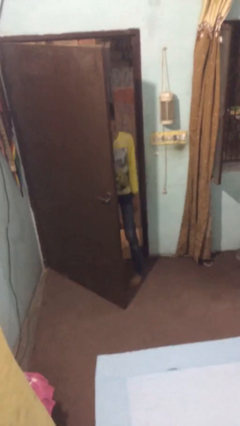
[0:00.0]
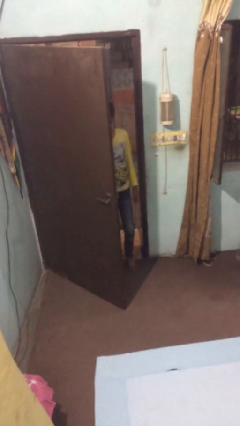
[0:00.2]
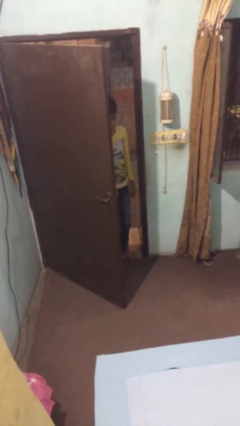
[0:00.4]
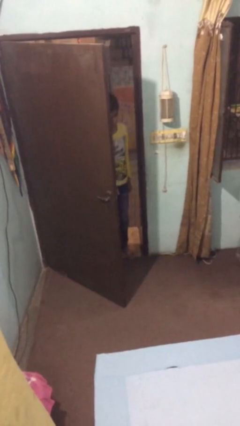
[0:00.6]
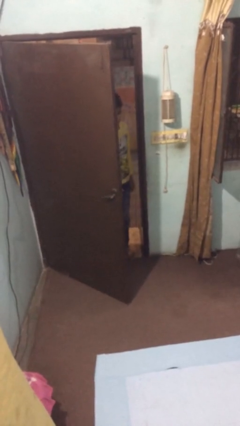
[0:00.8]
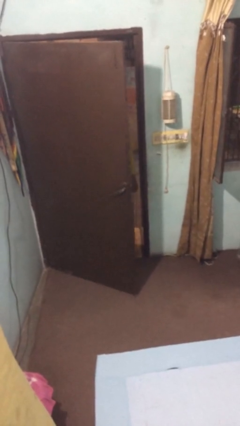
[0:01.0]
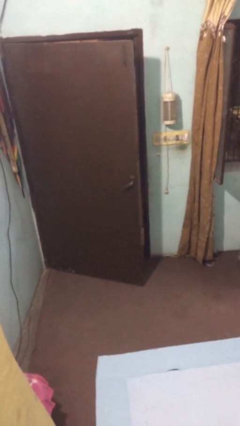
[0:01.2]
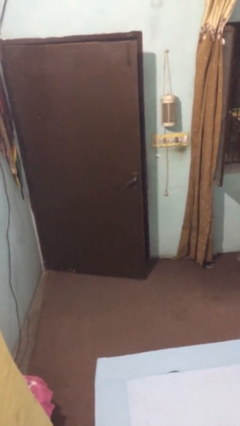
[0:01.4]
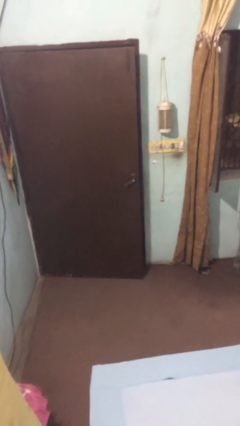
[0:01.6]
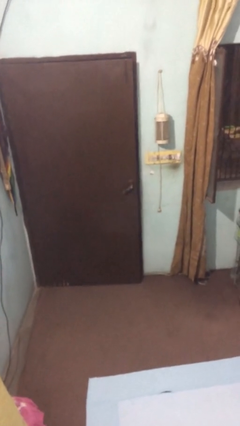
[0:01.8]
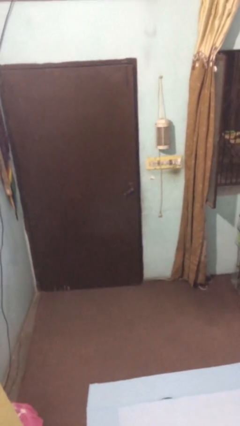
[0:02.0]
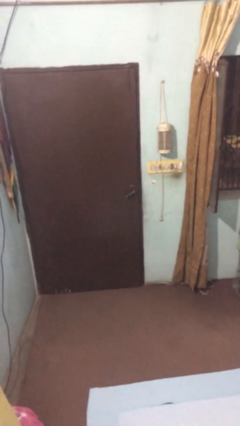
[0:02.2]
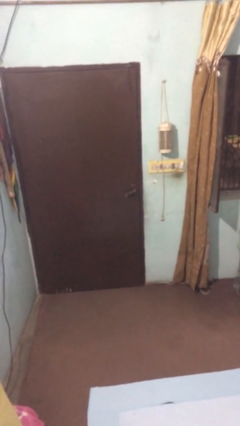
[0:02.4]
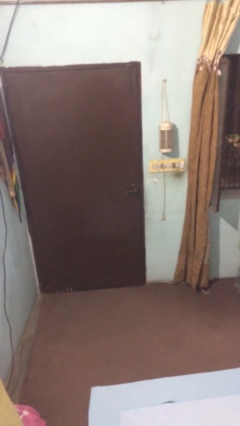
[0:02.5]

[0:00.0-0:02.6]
person closes facility door

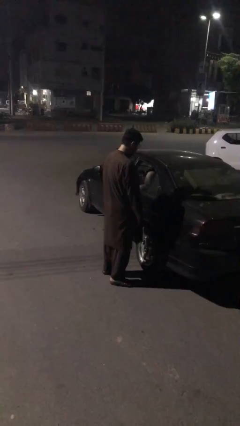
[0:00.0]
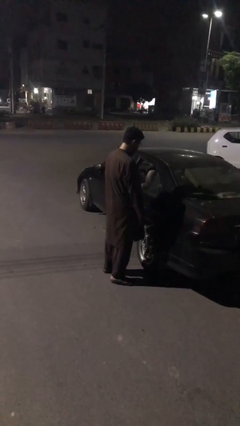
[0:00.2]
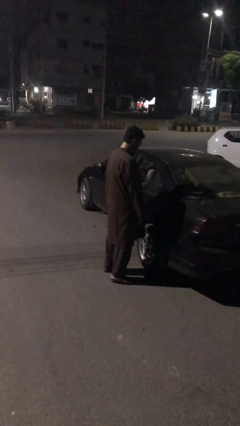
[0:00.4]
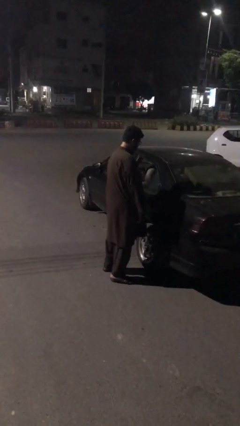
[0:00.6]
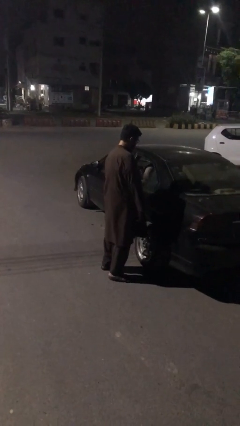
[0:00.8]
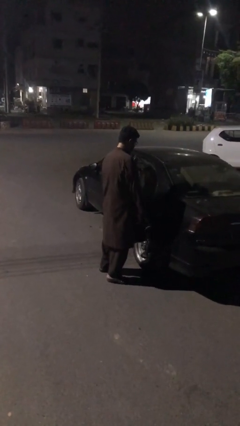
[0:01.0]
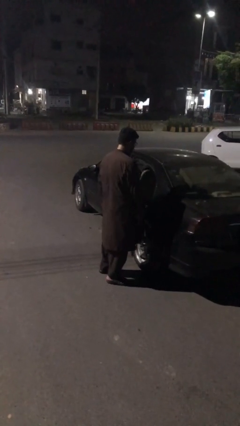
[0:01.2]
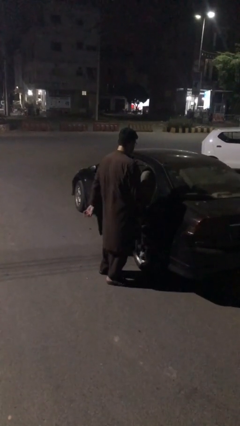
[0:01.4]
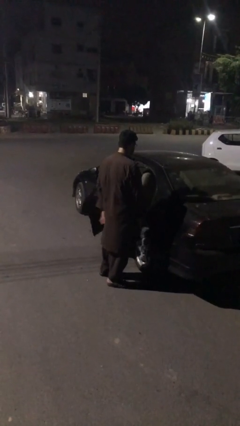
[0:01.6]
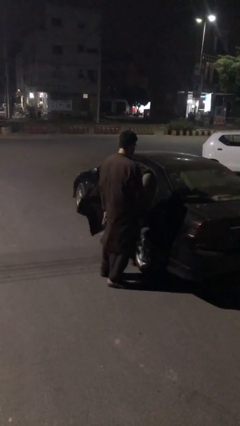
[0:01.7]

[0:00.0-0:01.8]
person opens car door

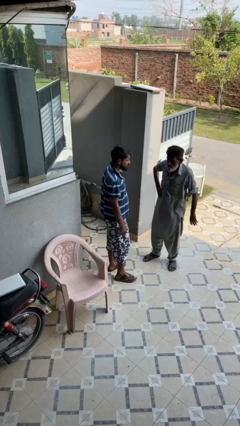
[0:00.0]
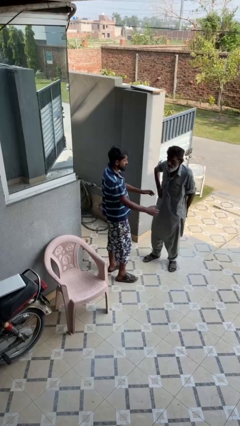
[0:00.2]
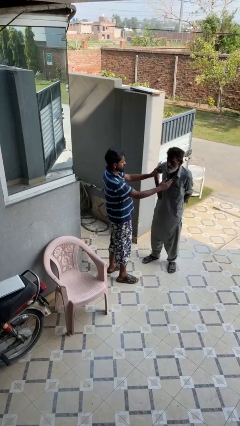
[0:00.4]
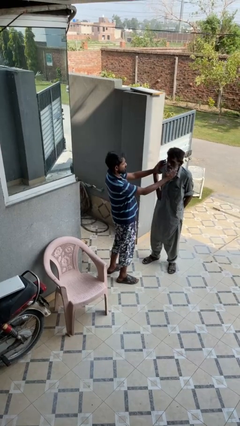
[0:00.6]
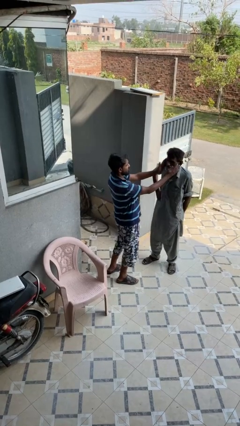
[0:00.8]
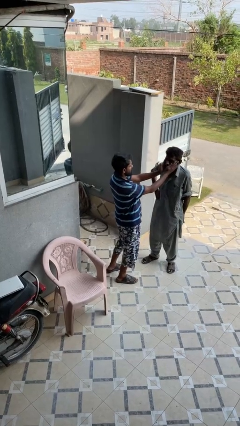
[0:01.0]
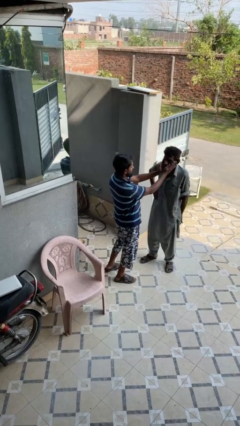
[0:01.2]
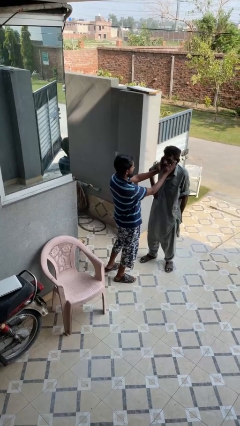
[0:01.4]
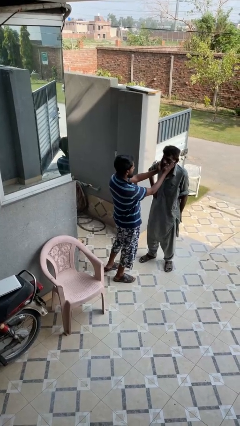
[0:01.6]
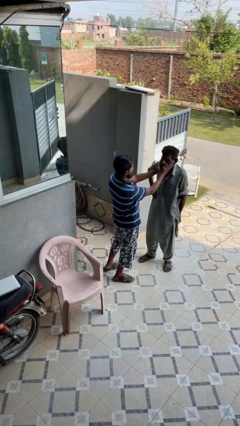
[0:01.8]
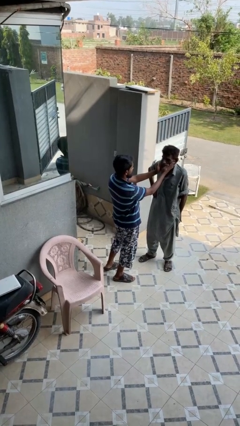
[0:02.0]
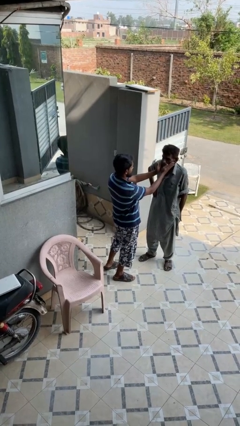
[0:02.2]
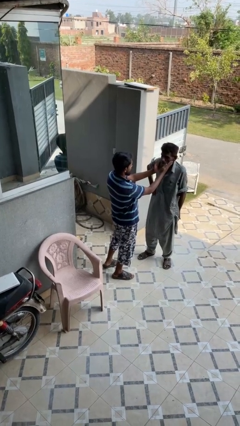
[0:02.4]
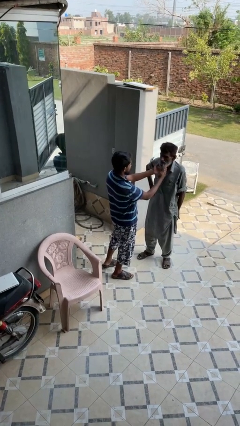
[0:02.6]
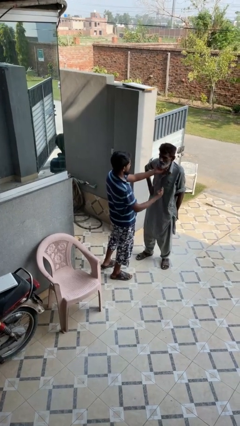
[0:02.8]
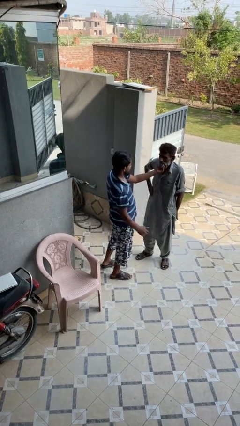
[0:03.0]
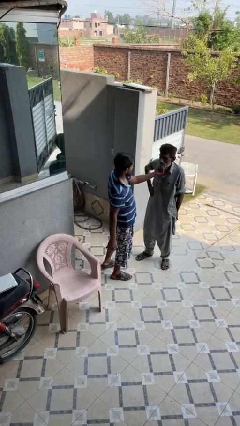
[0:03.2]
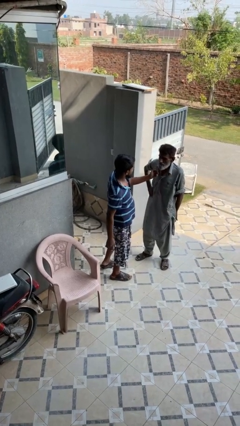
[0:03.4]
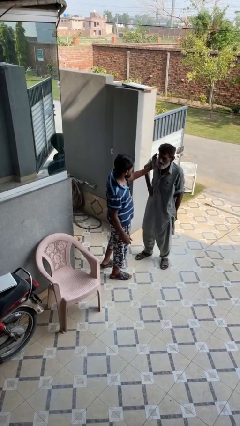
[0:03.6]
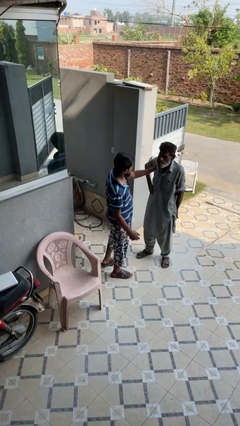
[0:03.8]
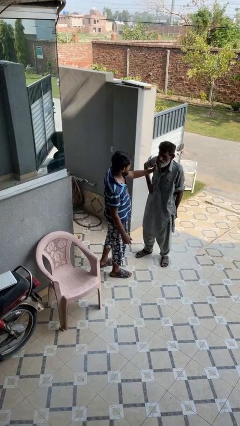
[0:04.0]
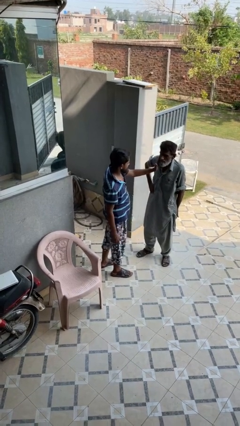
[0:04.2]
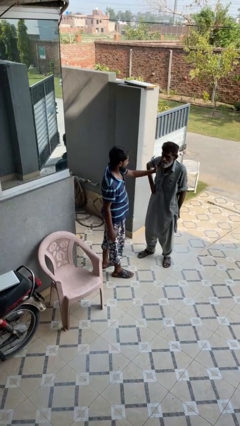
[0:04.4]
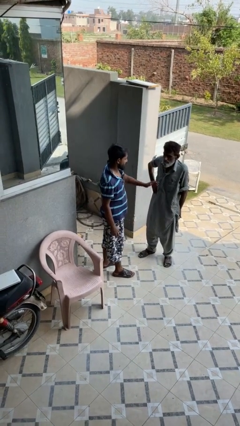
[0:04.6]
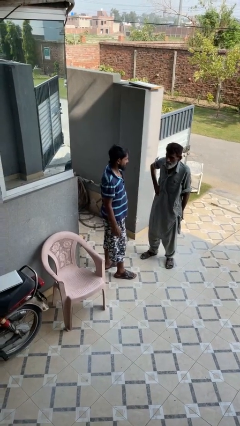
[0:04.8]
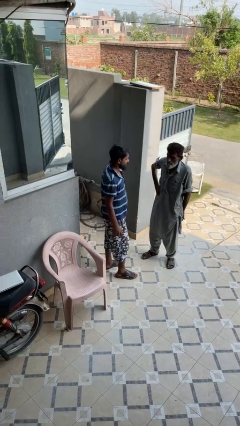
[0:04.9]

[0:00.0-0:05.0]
person touches face of person

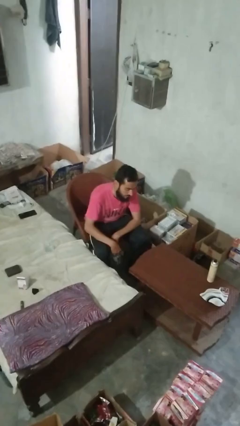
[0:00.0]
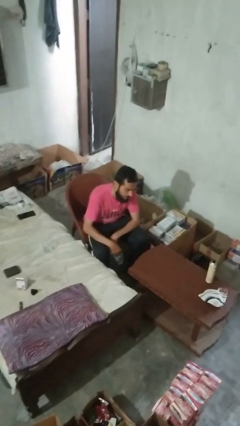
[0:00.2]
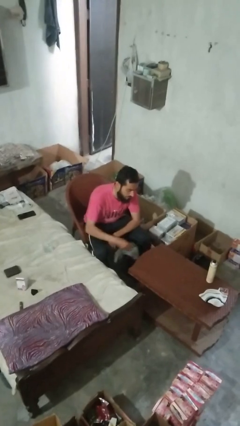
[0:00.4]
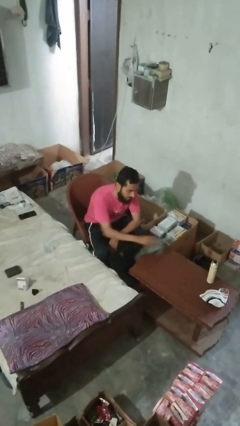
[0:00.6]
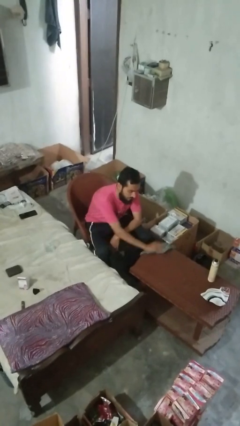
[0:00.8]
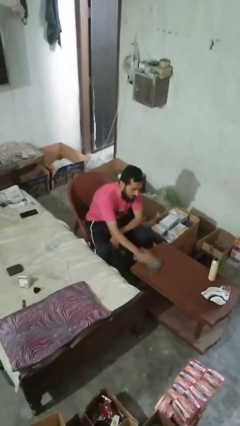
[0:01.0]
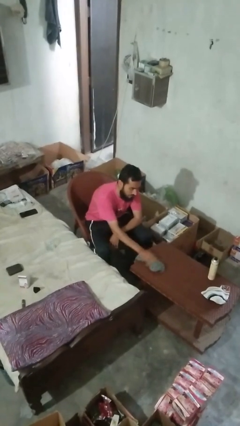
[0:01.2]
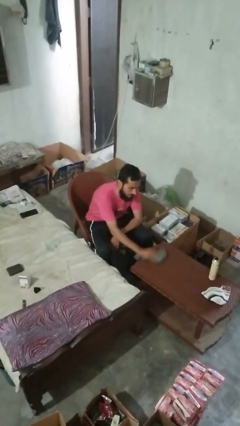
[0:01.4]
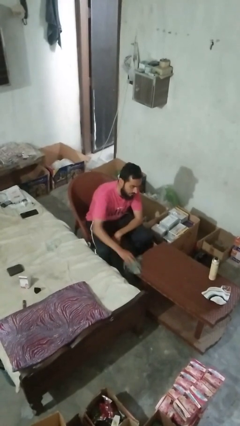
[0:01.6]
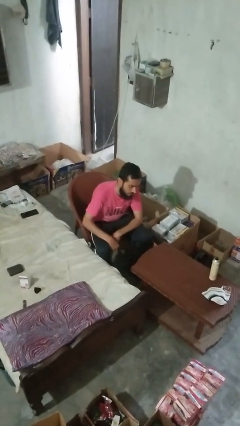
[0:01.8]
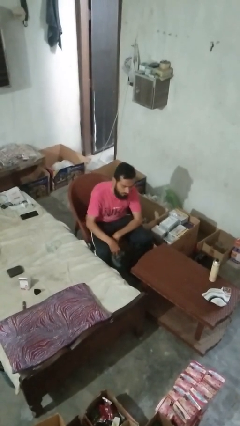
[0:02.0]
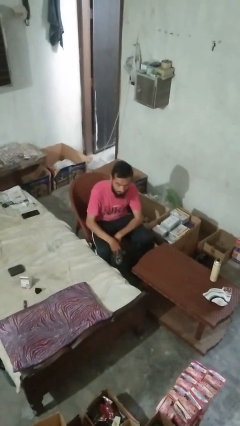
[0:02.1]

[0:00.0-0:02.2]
person cleans table with rag

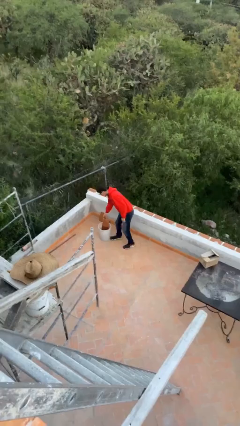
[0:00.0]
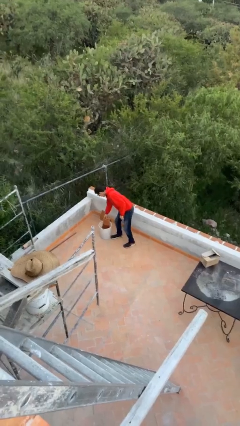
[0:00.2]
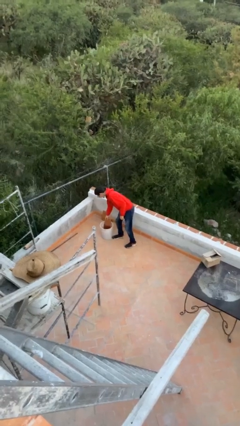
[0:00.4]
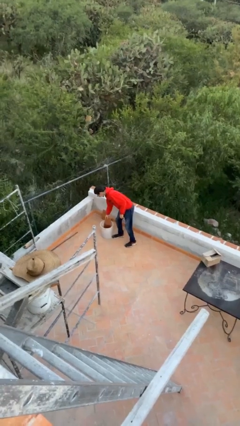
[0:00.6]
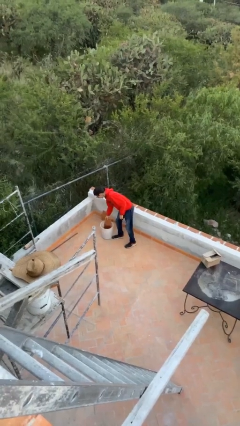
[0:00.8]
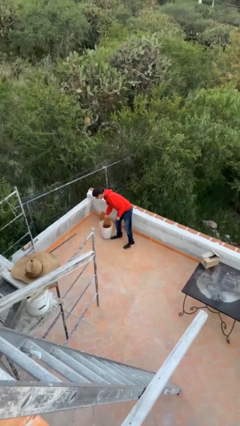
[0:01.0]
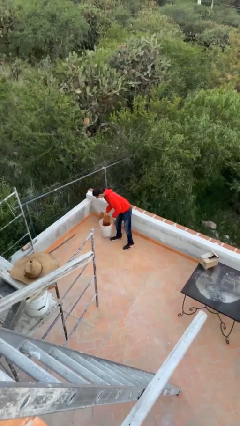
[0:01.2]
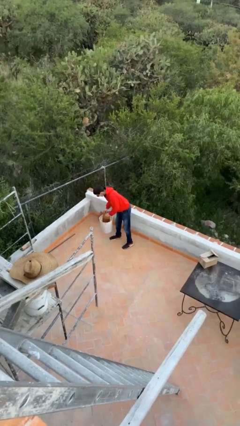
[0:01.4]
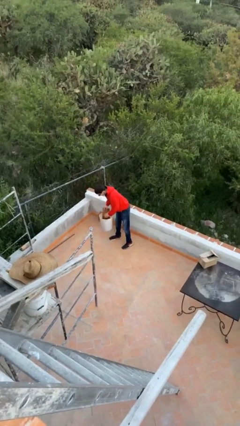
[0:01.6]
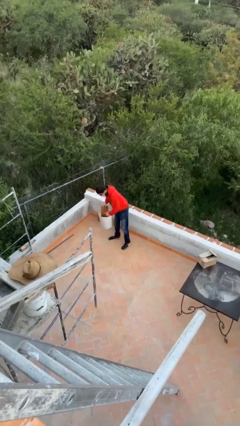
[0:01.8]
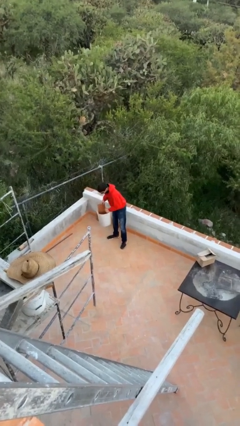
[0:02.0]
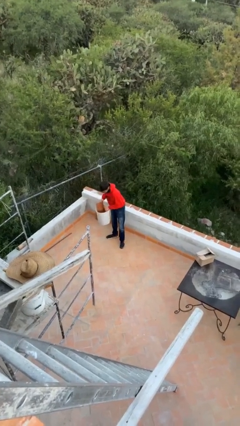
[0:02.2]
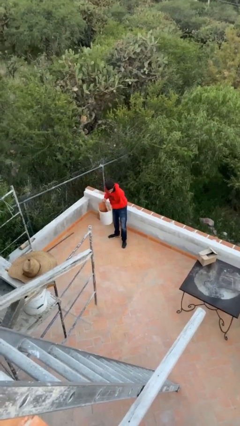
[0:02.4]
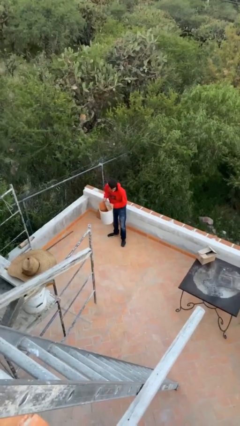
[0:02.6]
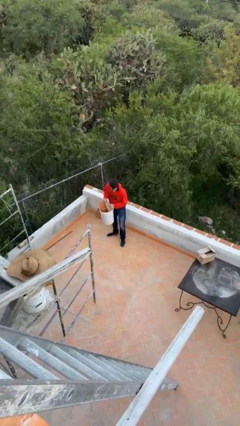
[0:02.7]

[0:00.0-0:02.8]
person picks up object from floor

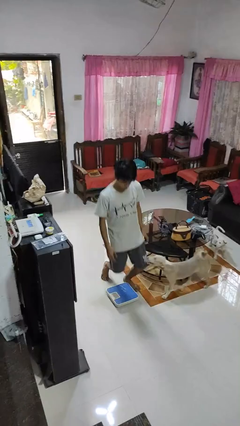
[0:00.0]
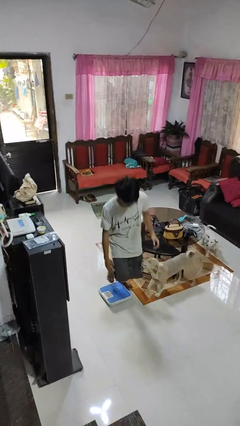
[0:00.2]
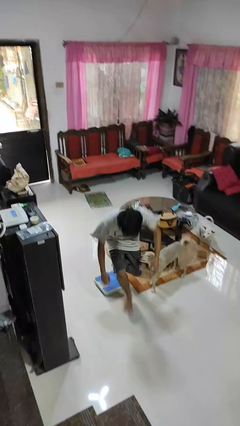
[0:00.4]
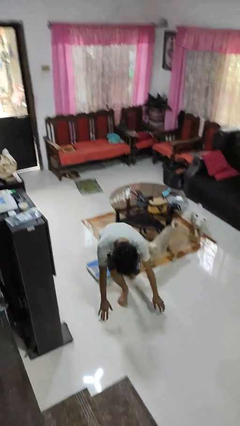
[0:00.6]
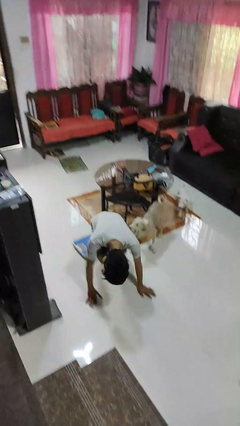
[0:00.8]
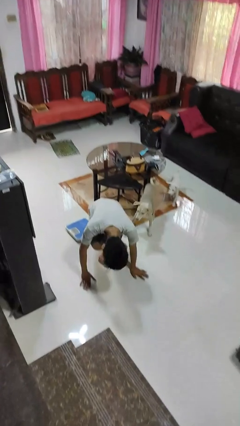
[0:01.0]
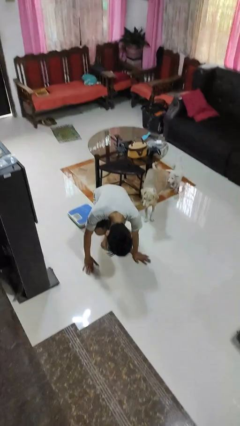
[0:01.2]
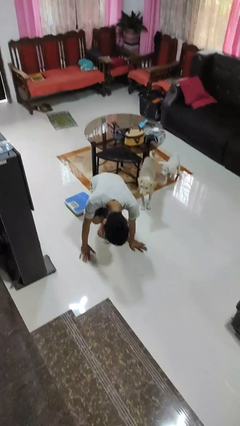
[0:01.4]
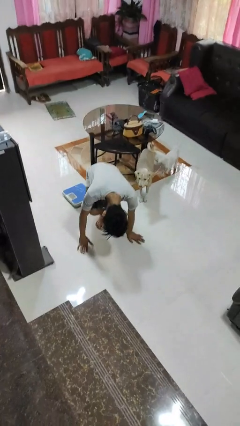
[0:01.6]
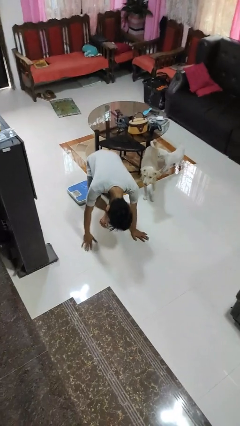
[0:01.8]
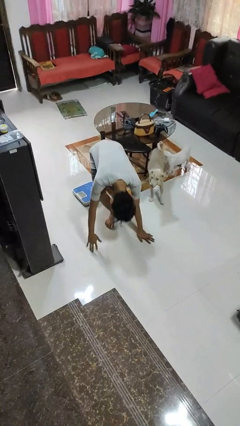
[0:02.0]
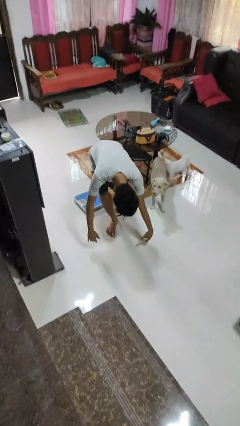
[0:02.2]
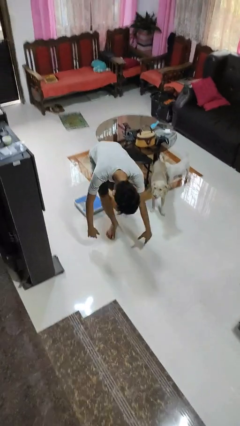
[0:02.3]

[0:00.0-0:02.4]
person trips on object on floor

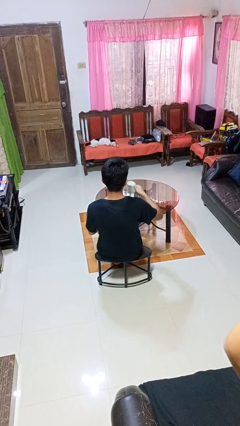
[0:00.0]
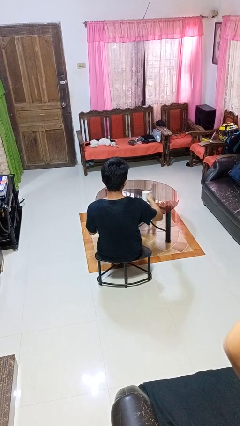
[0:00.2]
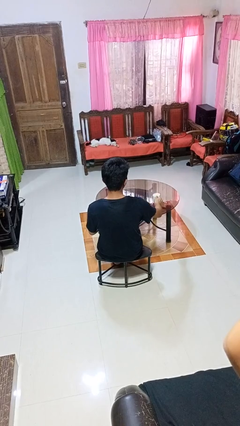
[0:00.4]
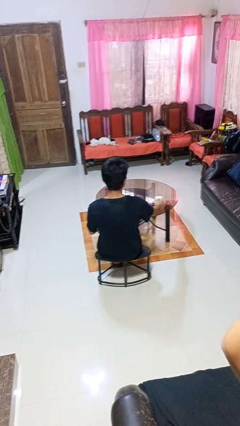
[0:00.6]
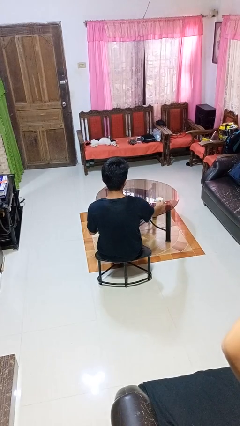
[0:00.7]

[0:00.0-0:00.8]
person puts down object on table
